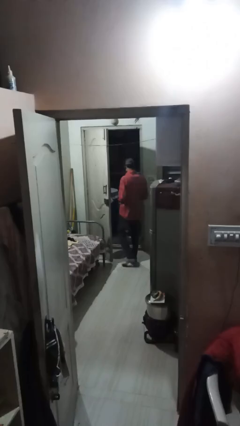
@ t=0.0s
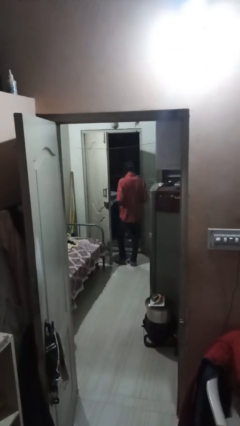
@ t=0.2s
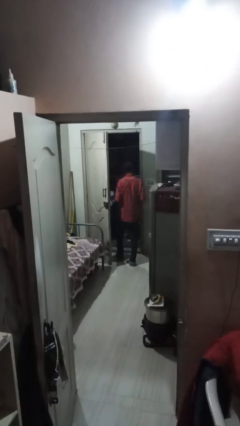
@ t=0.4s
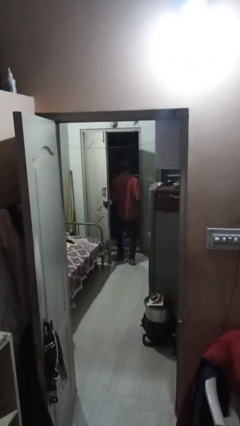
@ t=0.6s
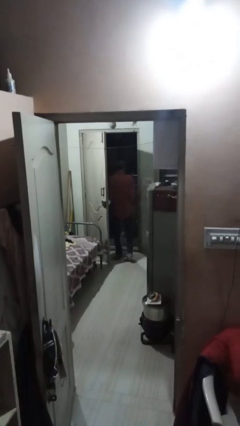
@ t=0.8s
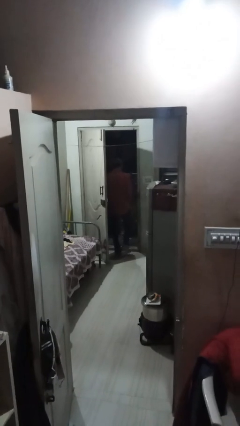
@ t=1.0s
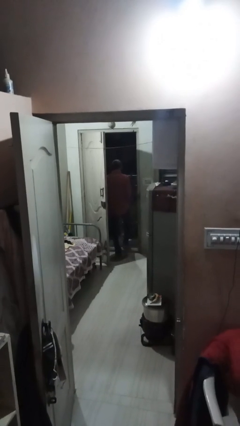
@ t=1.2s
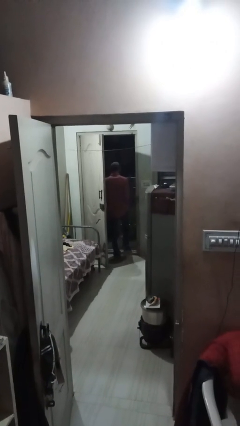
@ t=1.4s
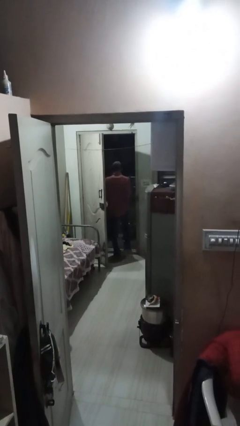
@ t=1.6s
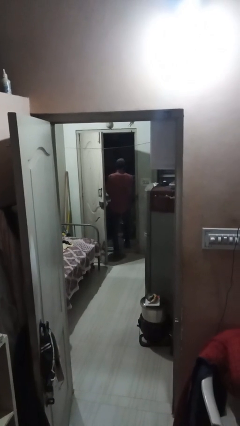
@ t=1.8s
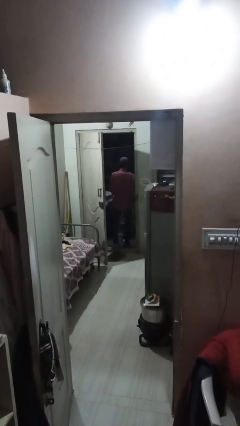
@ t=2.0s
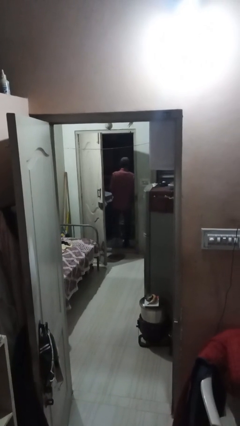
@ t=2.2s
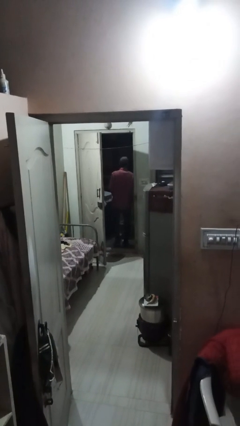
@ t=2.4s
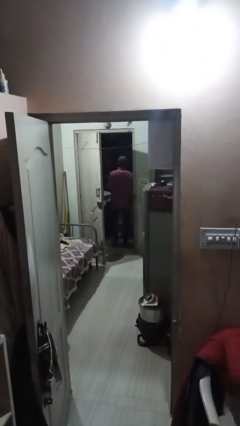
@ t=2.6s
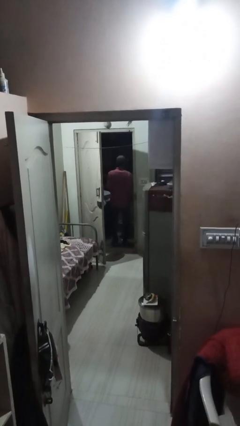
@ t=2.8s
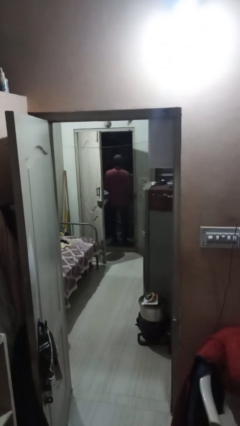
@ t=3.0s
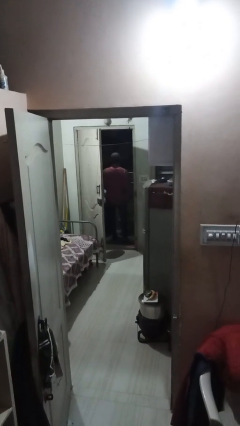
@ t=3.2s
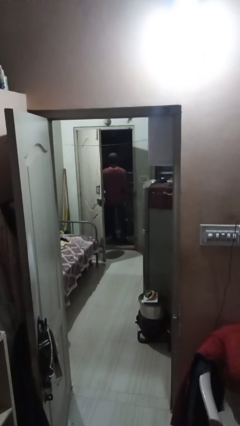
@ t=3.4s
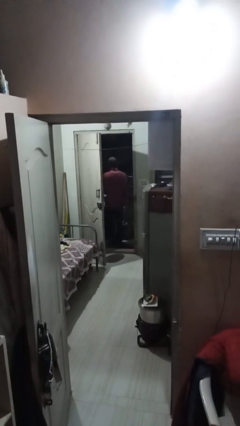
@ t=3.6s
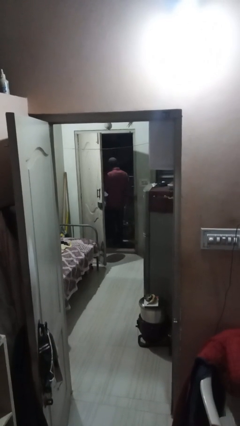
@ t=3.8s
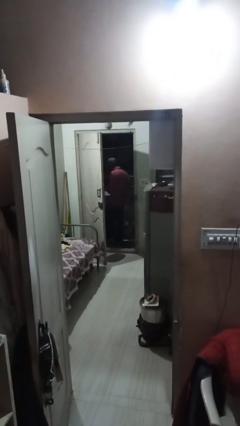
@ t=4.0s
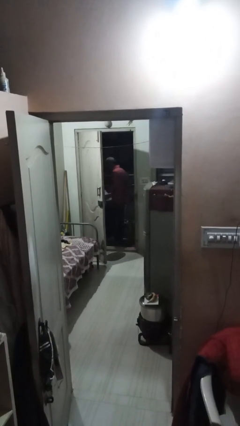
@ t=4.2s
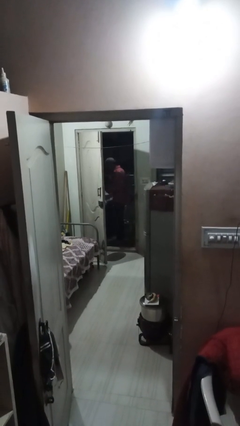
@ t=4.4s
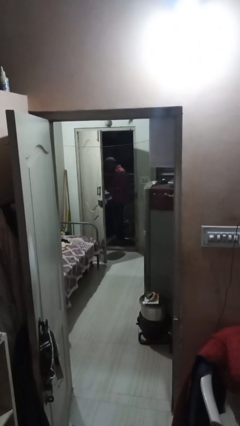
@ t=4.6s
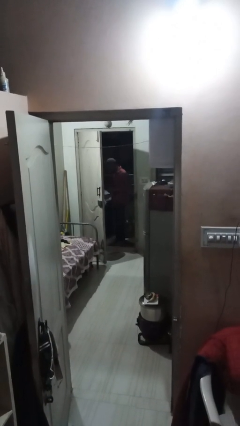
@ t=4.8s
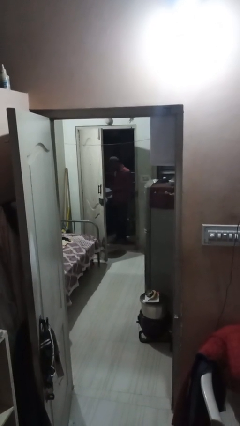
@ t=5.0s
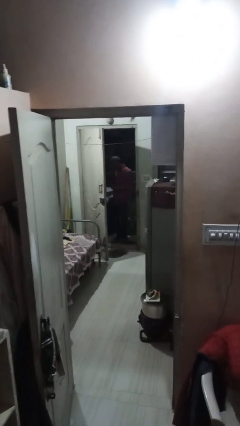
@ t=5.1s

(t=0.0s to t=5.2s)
person exits scene through structure

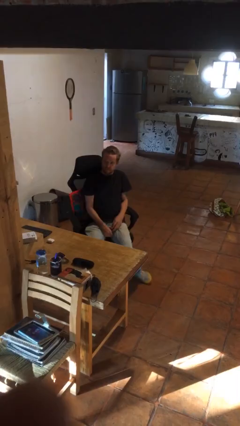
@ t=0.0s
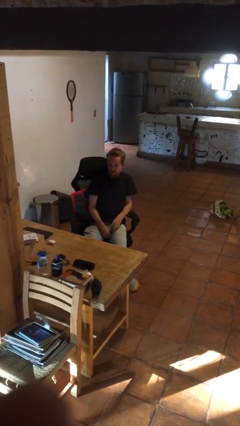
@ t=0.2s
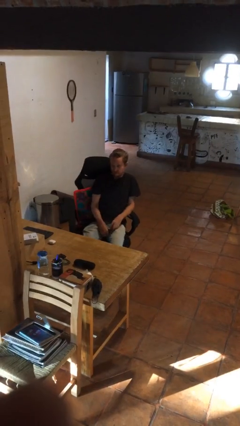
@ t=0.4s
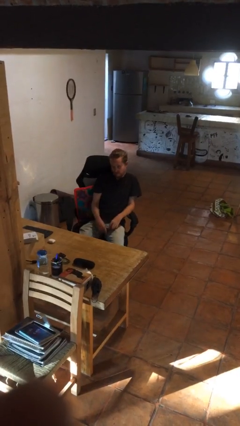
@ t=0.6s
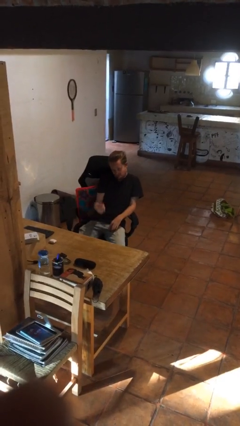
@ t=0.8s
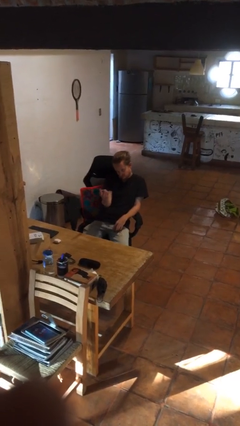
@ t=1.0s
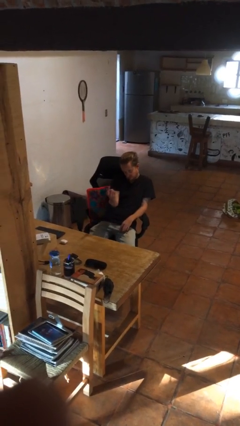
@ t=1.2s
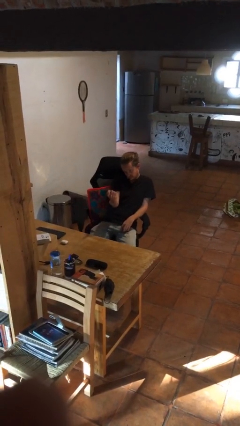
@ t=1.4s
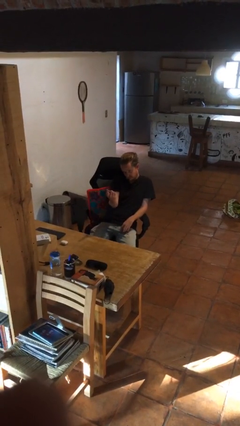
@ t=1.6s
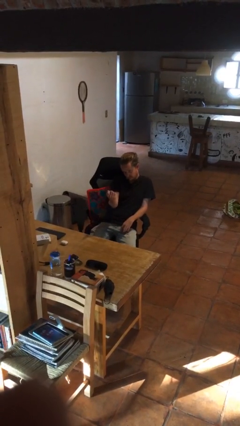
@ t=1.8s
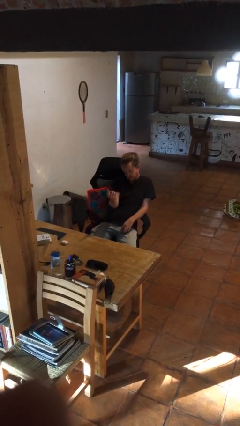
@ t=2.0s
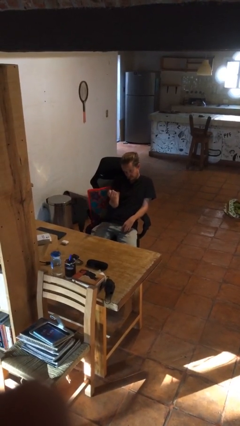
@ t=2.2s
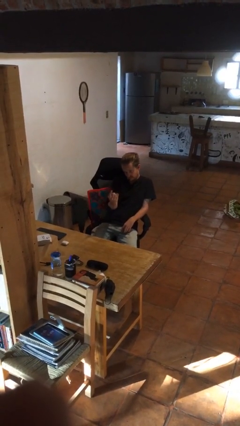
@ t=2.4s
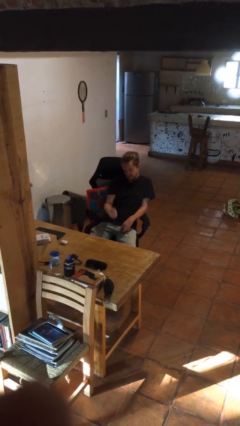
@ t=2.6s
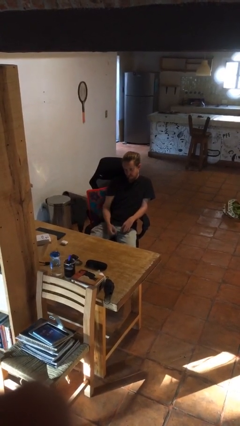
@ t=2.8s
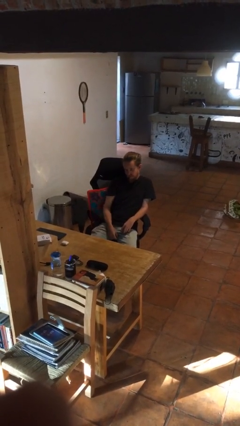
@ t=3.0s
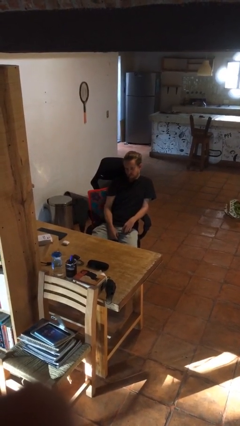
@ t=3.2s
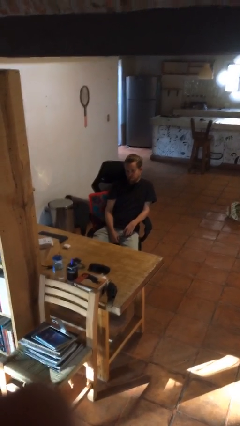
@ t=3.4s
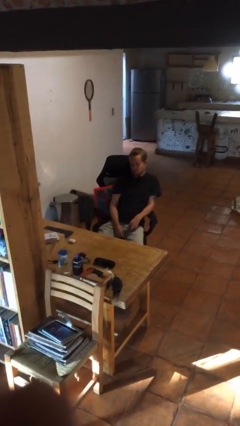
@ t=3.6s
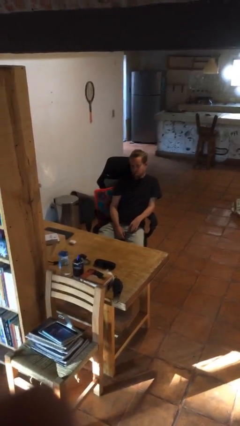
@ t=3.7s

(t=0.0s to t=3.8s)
person gestures come here

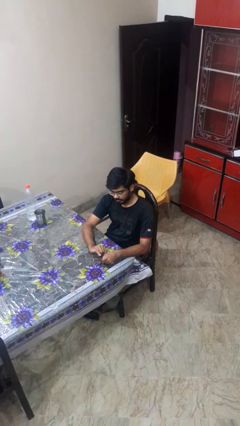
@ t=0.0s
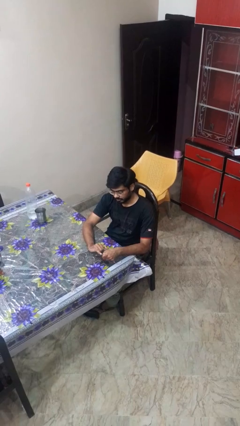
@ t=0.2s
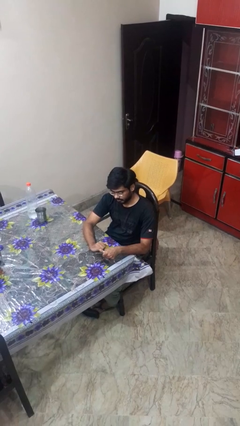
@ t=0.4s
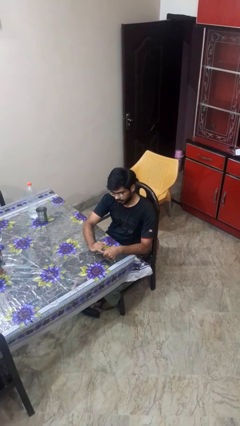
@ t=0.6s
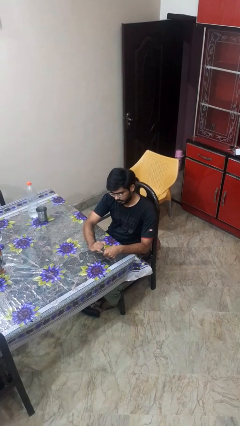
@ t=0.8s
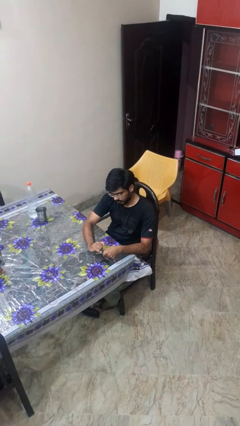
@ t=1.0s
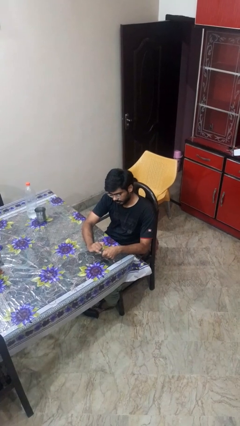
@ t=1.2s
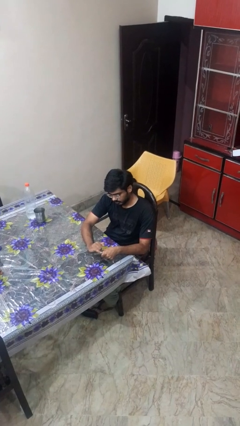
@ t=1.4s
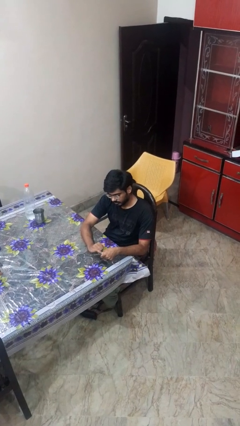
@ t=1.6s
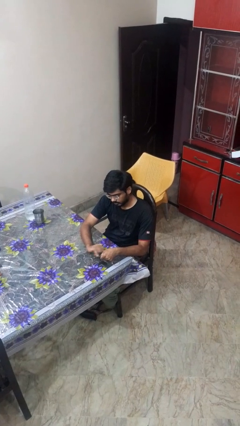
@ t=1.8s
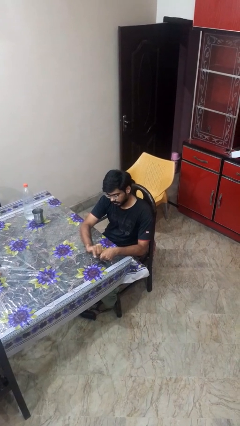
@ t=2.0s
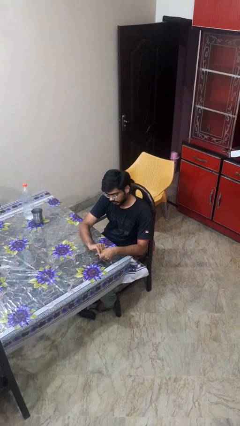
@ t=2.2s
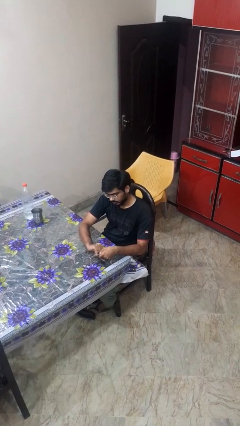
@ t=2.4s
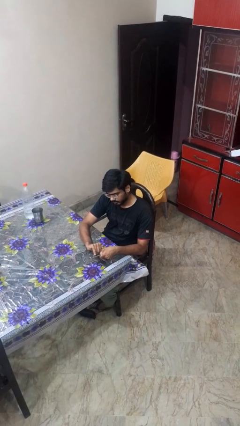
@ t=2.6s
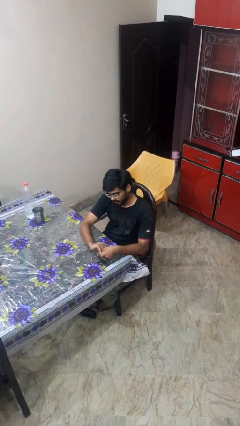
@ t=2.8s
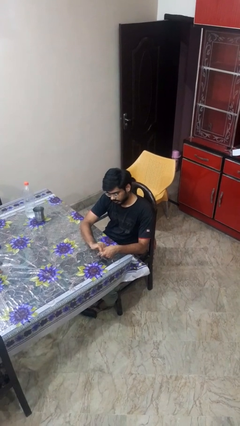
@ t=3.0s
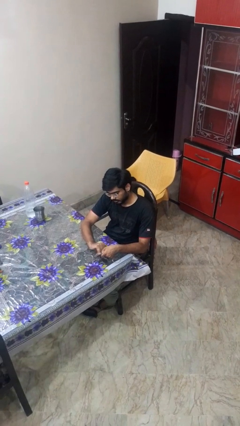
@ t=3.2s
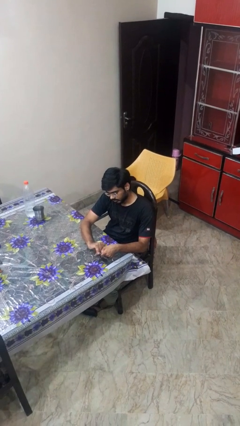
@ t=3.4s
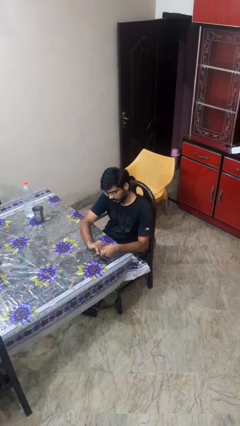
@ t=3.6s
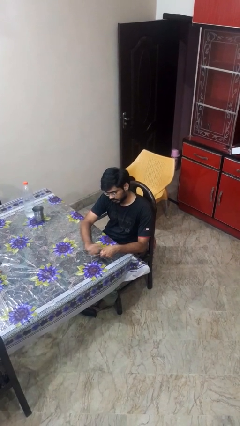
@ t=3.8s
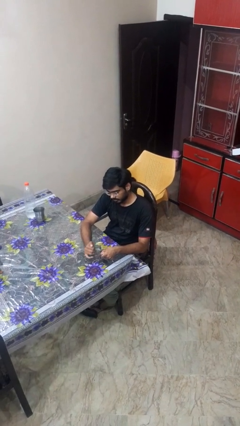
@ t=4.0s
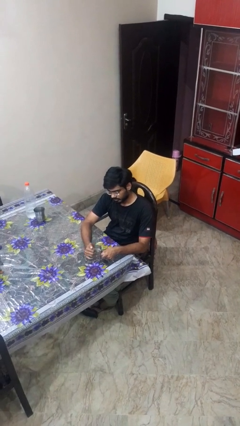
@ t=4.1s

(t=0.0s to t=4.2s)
person files fingernails

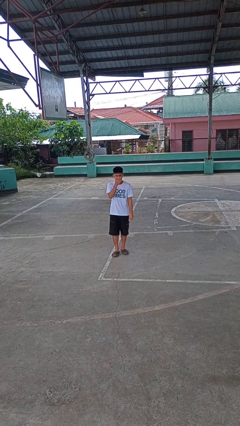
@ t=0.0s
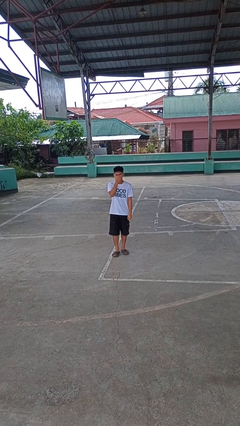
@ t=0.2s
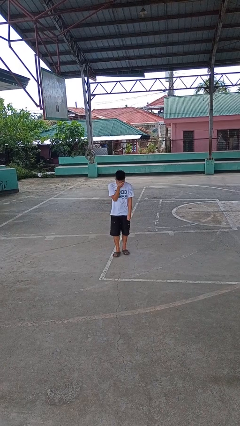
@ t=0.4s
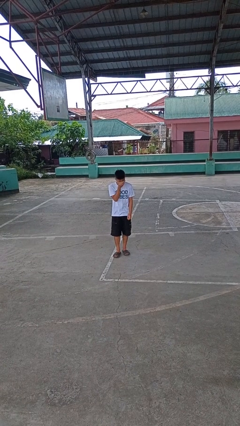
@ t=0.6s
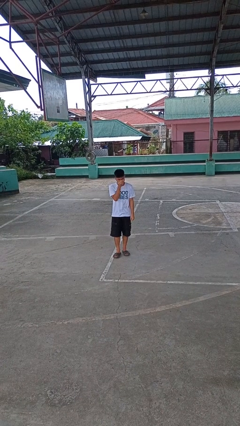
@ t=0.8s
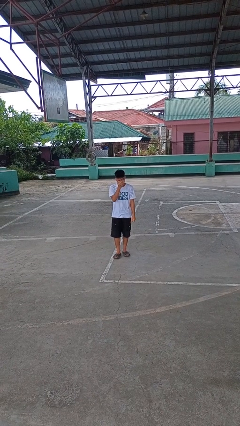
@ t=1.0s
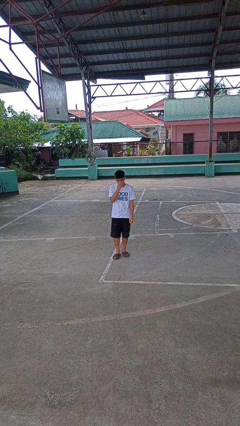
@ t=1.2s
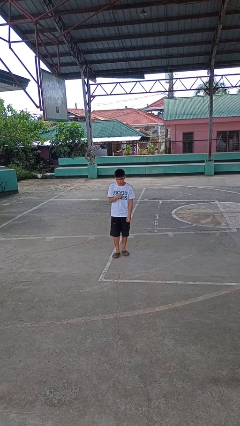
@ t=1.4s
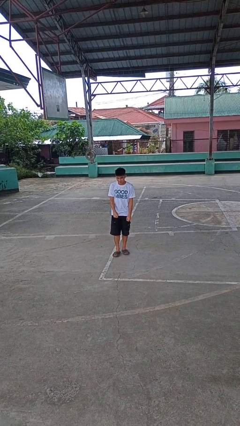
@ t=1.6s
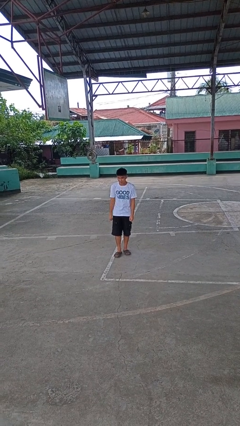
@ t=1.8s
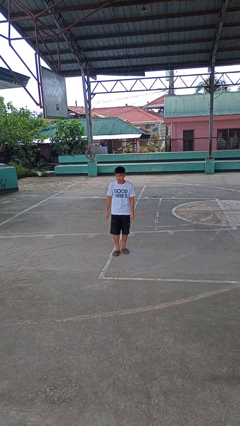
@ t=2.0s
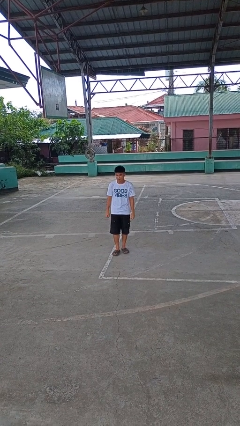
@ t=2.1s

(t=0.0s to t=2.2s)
person sneezes into hand

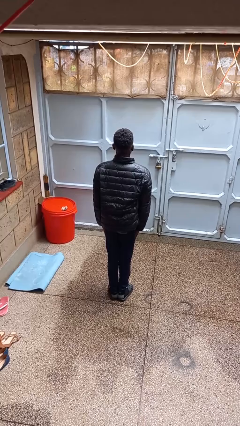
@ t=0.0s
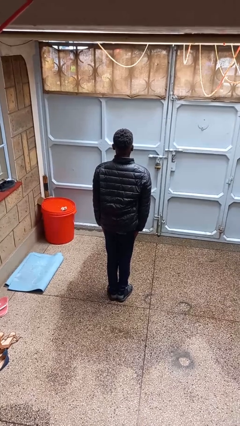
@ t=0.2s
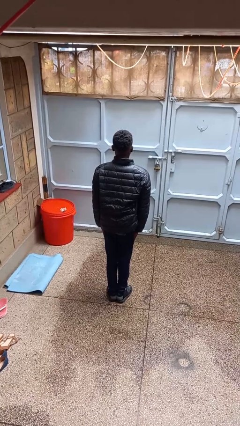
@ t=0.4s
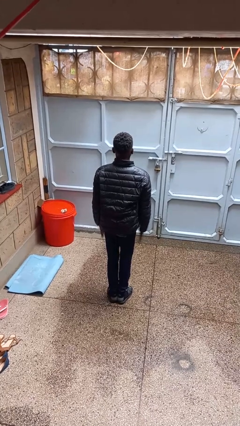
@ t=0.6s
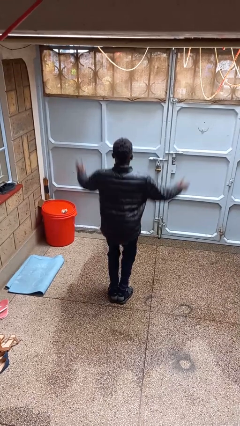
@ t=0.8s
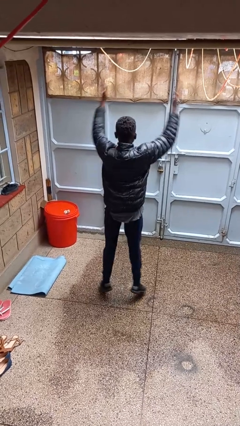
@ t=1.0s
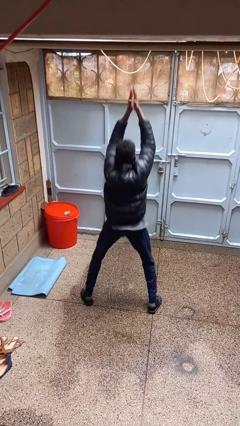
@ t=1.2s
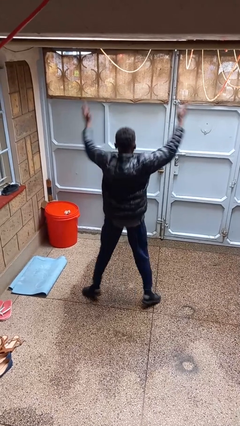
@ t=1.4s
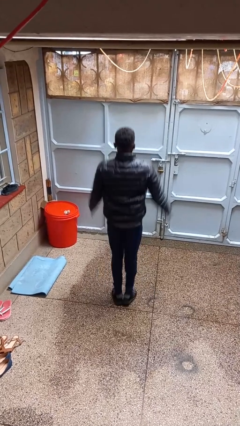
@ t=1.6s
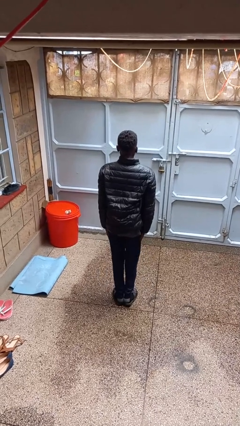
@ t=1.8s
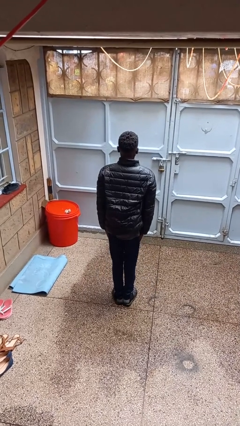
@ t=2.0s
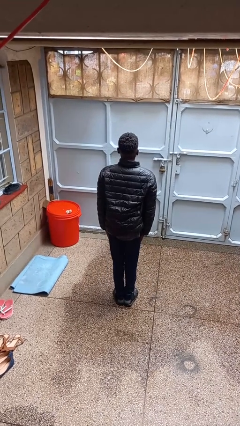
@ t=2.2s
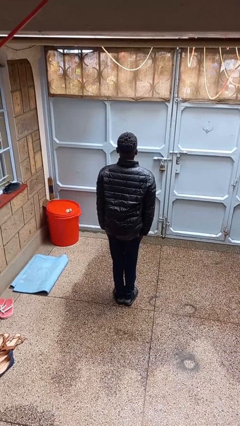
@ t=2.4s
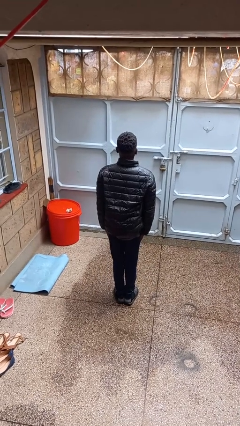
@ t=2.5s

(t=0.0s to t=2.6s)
person exercises with jumping jacks
